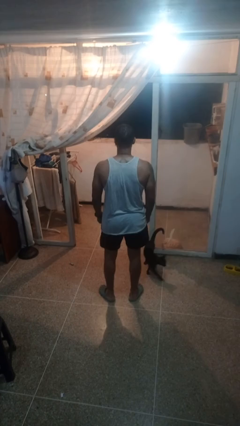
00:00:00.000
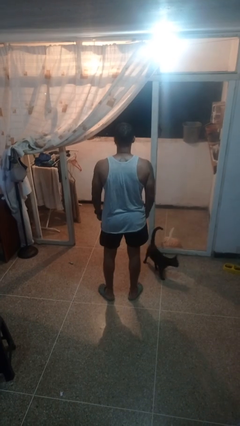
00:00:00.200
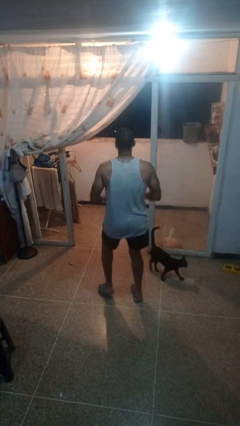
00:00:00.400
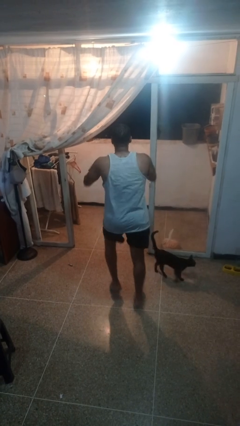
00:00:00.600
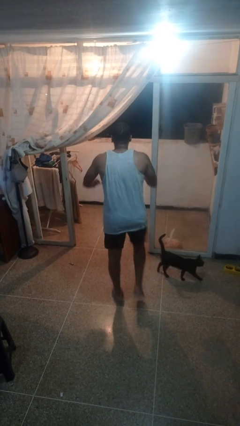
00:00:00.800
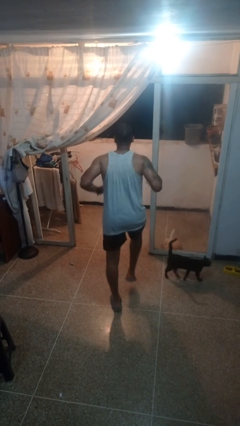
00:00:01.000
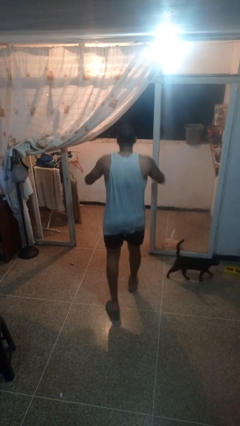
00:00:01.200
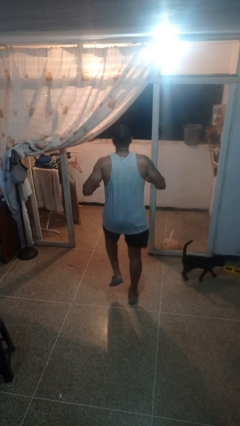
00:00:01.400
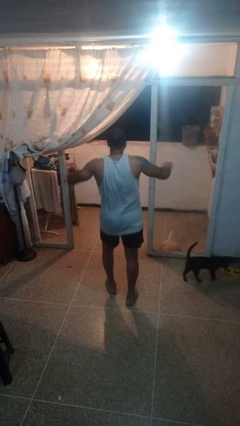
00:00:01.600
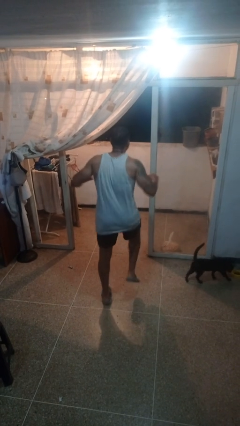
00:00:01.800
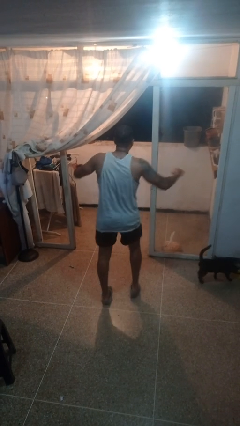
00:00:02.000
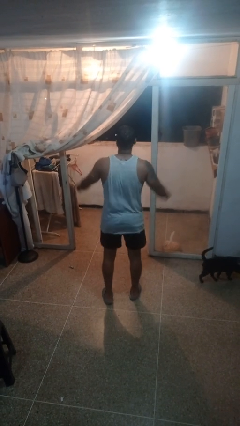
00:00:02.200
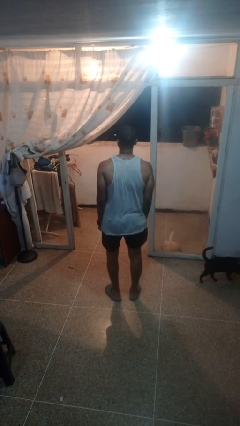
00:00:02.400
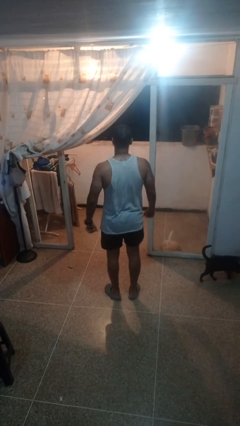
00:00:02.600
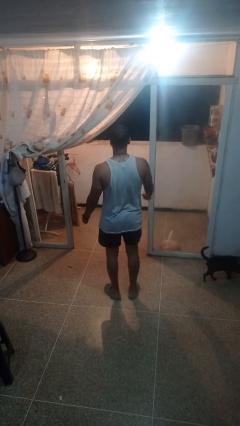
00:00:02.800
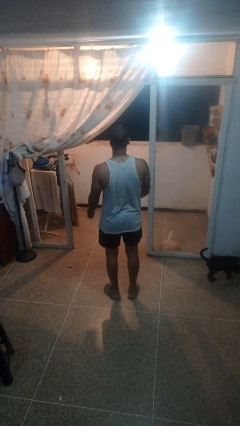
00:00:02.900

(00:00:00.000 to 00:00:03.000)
person dances in place

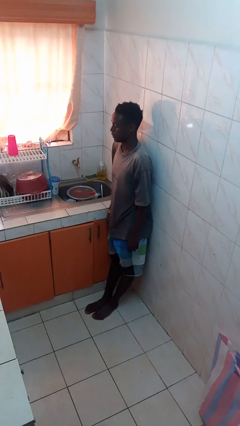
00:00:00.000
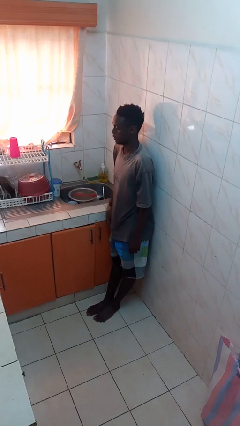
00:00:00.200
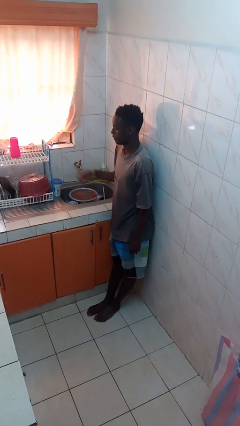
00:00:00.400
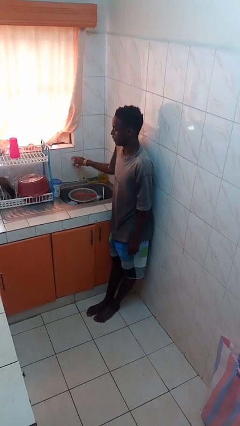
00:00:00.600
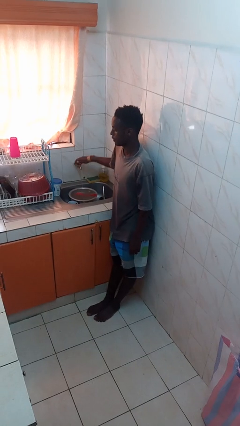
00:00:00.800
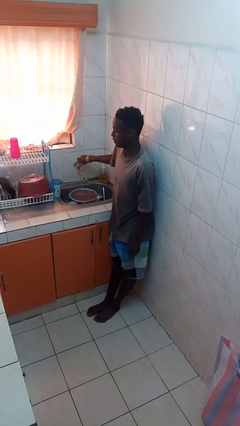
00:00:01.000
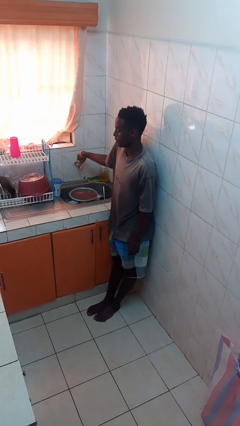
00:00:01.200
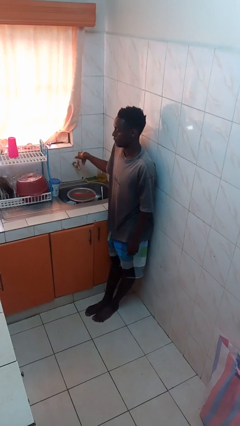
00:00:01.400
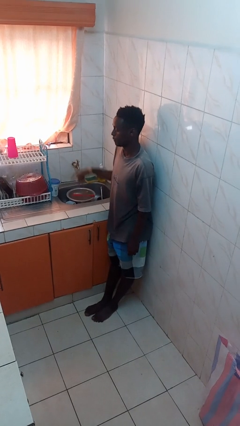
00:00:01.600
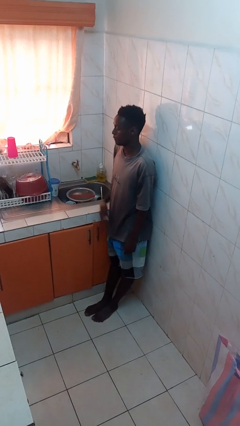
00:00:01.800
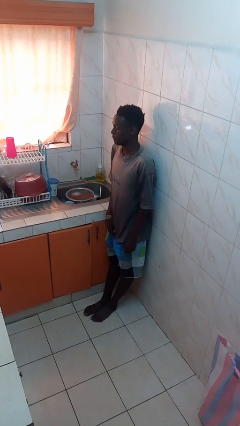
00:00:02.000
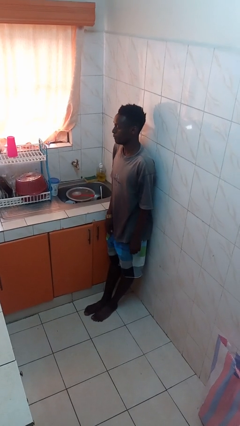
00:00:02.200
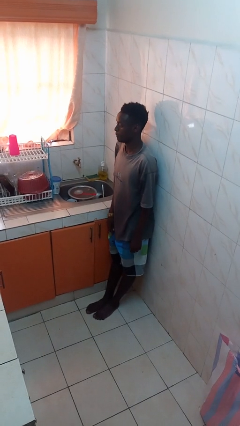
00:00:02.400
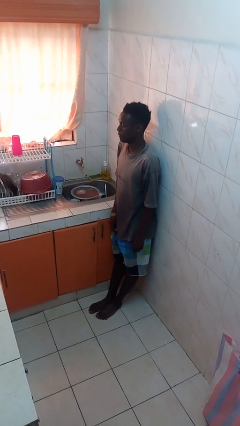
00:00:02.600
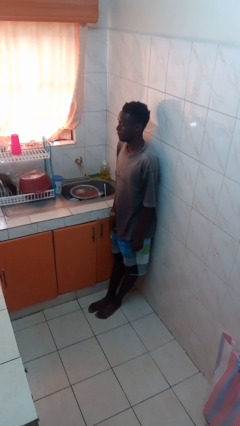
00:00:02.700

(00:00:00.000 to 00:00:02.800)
person turns off faucet

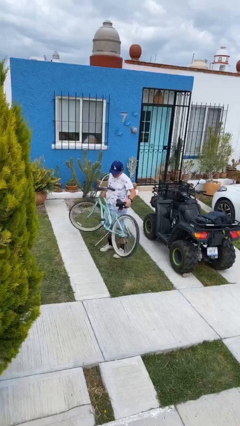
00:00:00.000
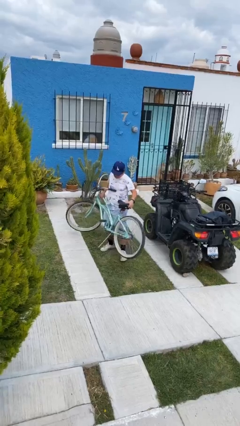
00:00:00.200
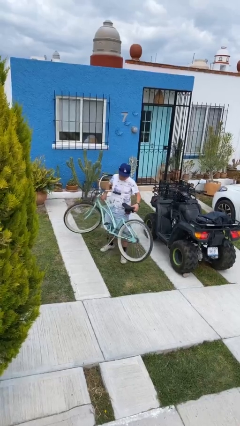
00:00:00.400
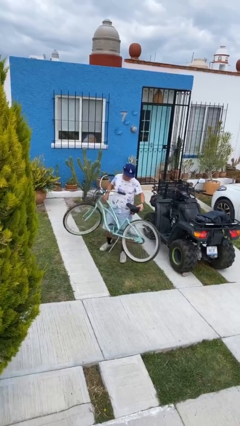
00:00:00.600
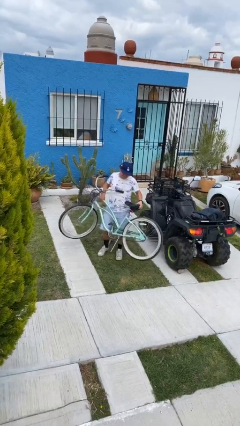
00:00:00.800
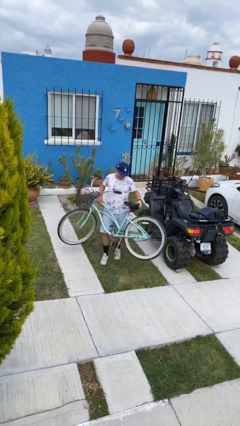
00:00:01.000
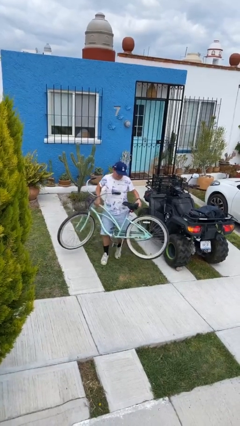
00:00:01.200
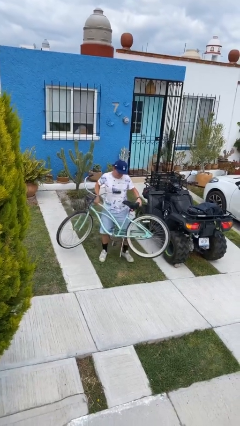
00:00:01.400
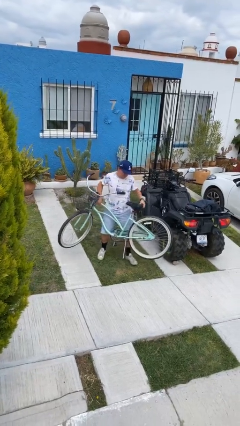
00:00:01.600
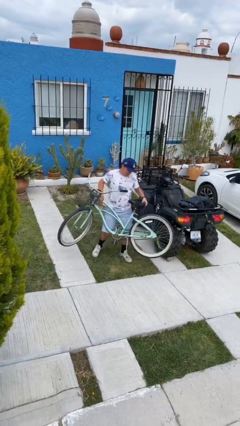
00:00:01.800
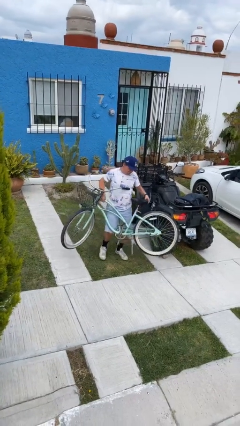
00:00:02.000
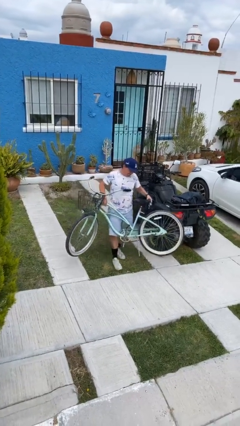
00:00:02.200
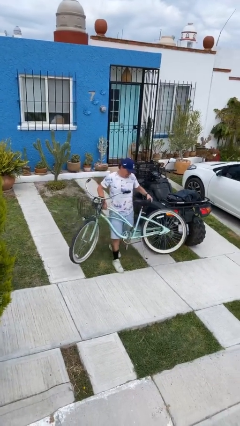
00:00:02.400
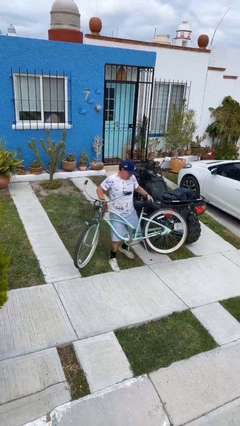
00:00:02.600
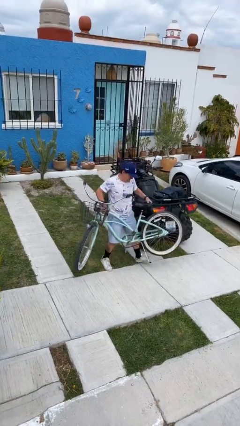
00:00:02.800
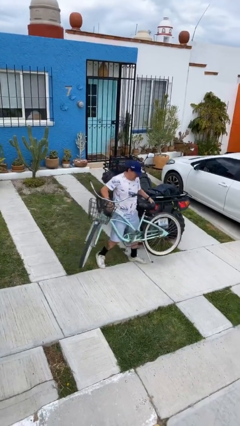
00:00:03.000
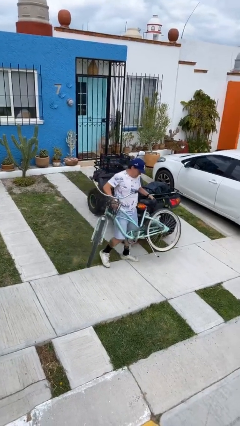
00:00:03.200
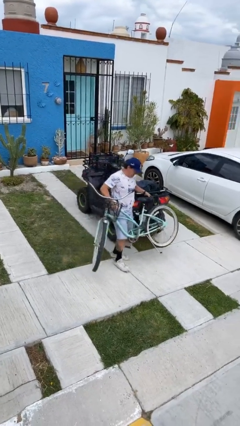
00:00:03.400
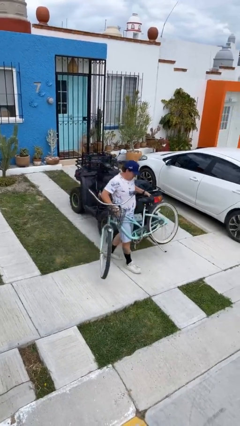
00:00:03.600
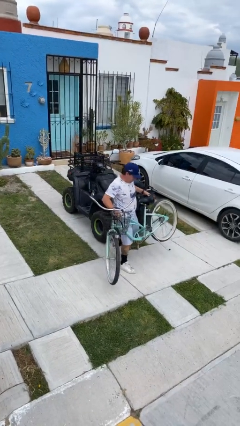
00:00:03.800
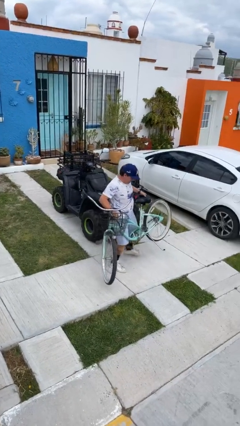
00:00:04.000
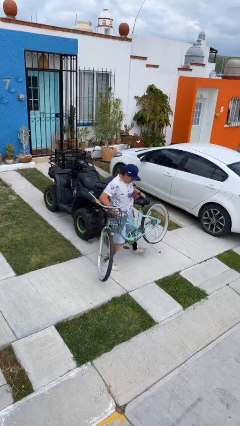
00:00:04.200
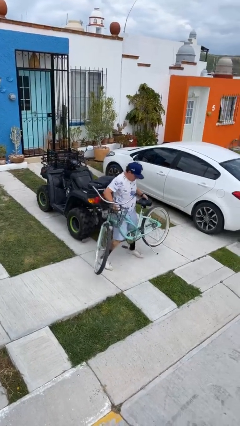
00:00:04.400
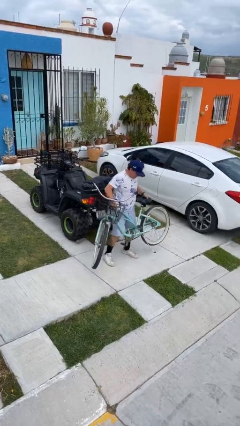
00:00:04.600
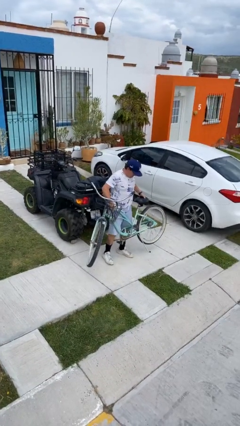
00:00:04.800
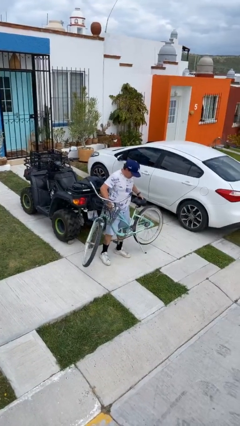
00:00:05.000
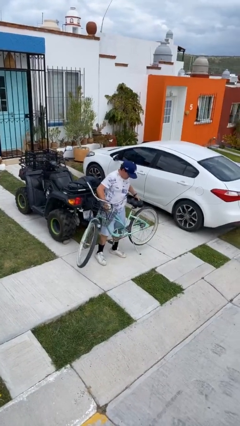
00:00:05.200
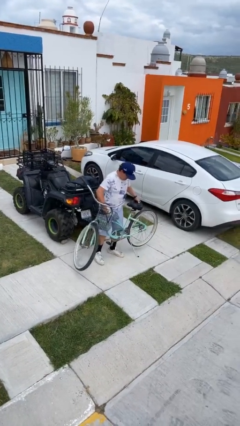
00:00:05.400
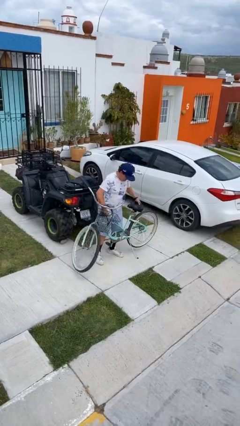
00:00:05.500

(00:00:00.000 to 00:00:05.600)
person carries heavy object

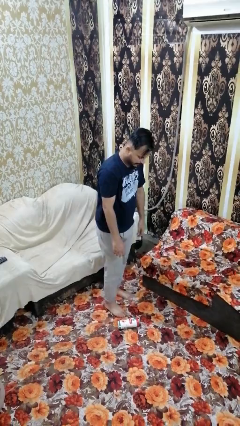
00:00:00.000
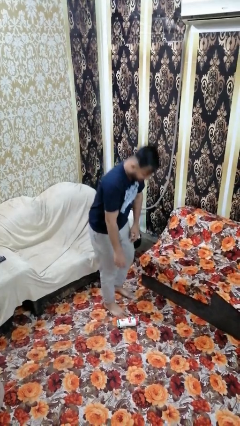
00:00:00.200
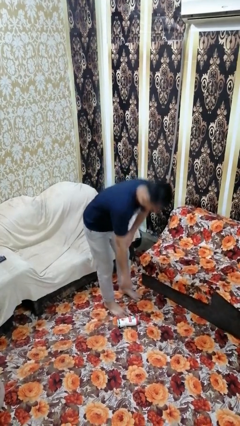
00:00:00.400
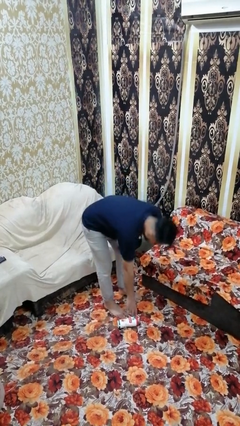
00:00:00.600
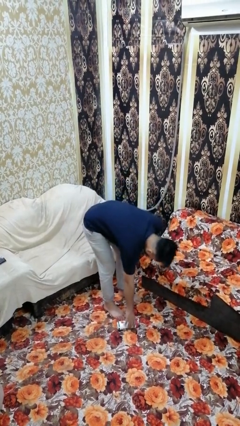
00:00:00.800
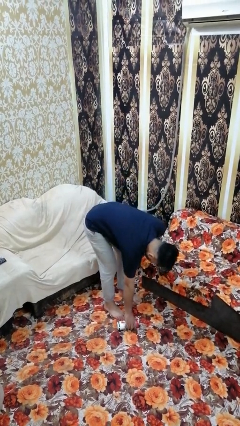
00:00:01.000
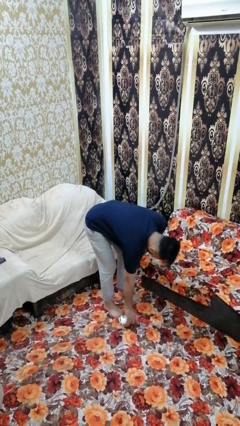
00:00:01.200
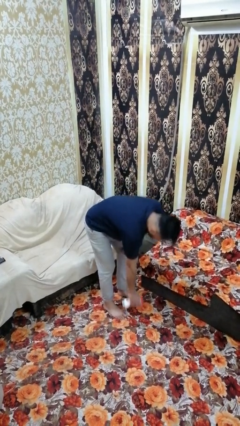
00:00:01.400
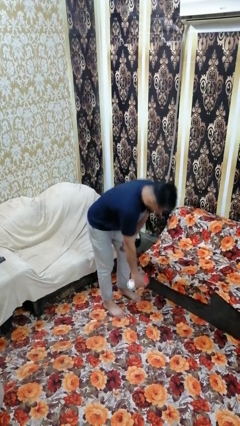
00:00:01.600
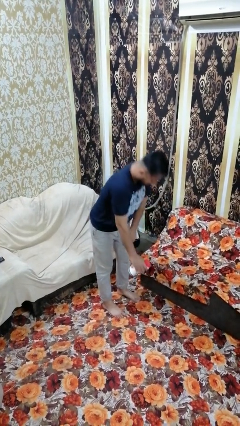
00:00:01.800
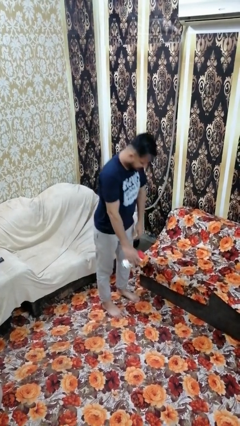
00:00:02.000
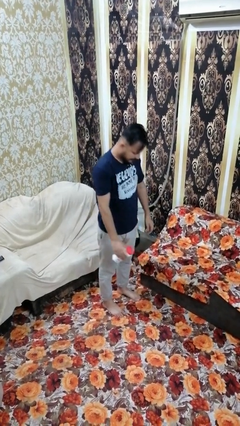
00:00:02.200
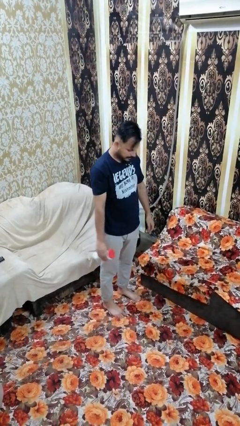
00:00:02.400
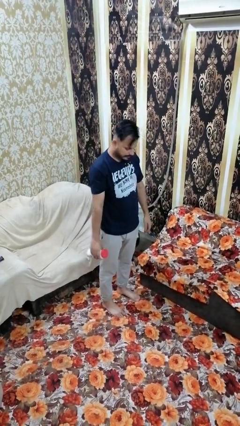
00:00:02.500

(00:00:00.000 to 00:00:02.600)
person picks up object from floor

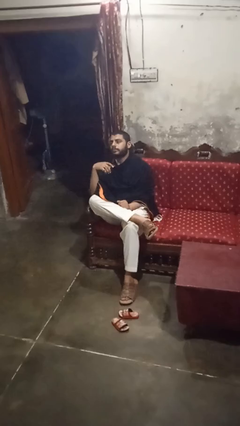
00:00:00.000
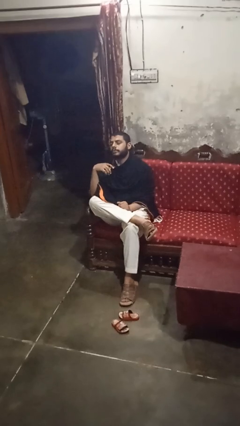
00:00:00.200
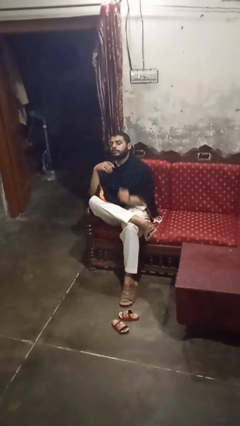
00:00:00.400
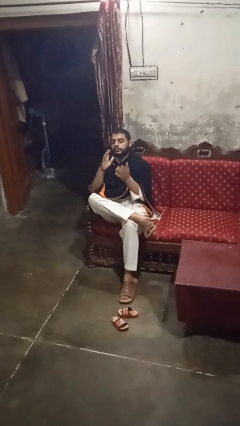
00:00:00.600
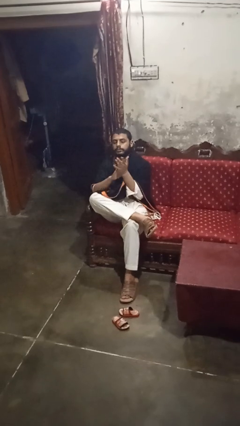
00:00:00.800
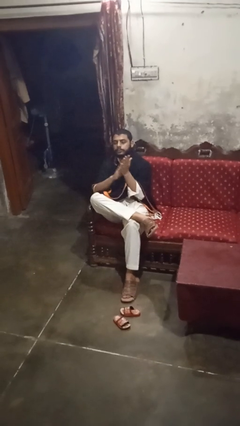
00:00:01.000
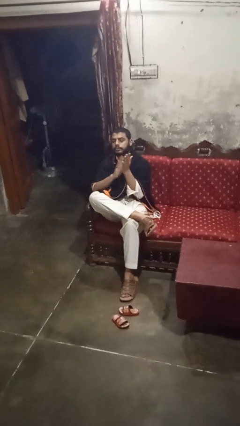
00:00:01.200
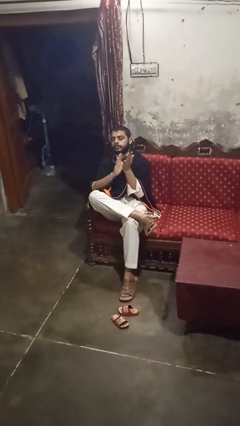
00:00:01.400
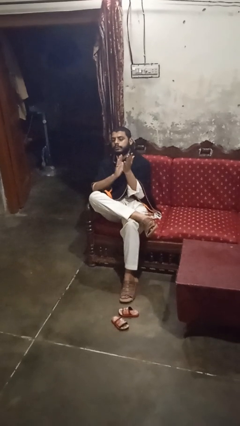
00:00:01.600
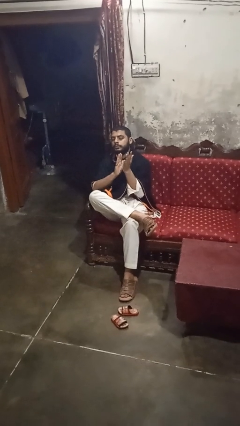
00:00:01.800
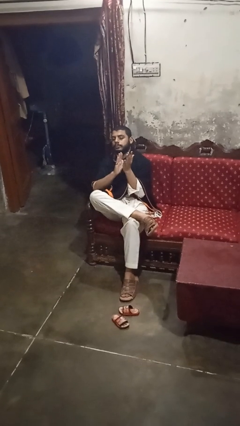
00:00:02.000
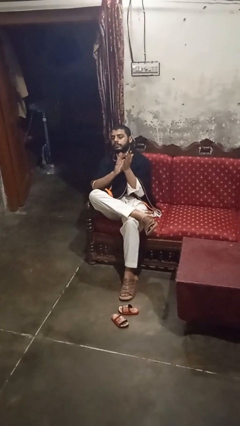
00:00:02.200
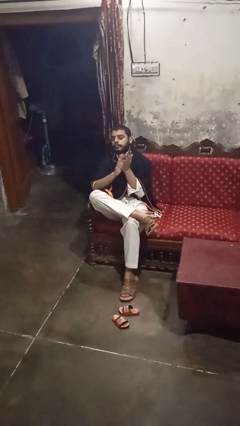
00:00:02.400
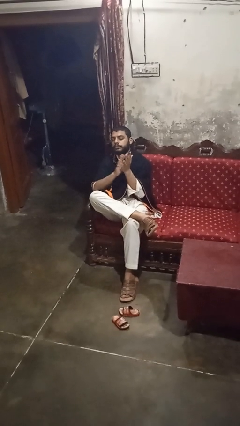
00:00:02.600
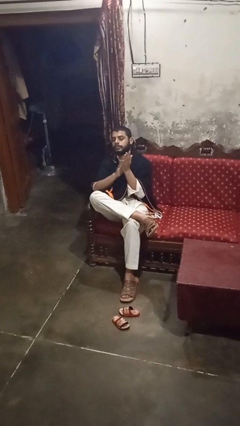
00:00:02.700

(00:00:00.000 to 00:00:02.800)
person claps hands

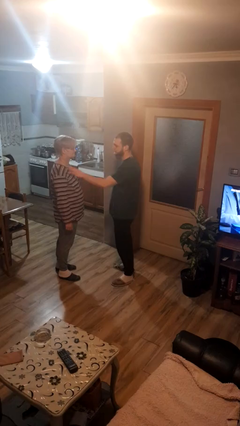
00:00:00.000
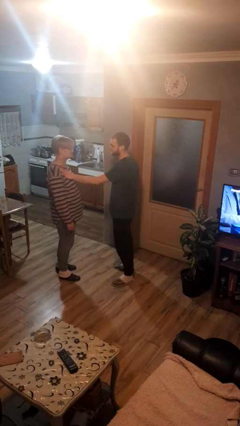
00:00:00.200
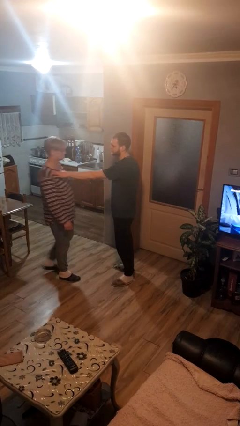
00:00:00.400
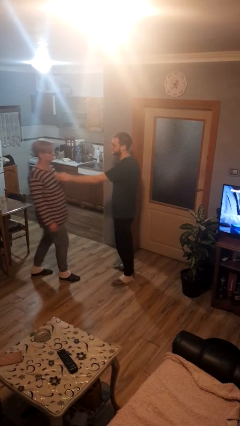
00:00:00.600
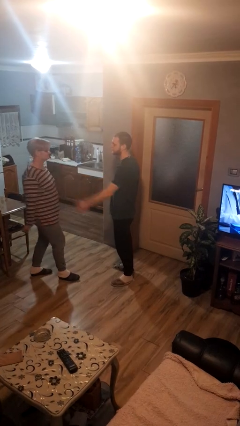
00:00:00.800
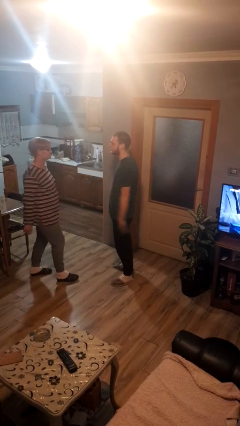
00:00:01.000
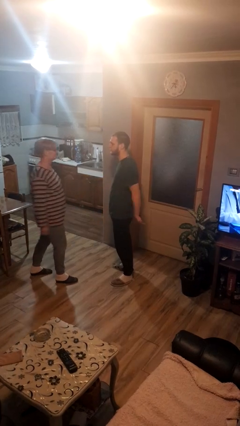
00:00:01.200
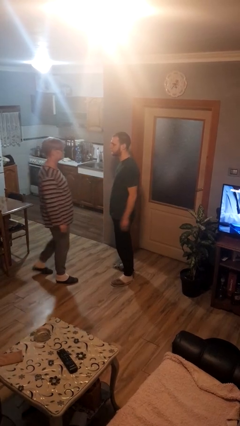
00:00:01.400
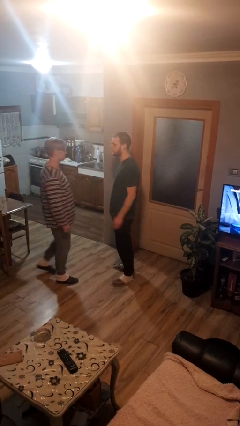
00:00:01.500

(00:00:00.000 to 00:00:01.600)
person shoves person
